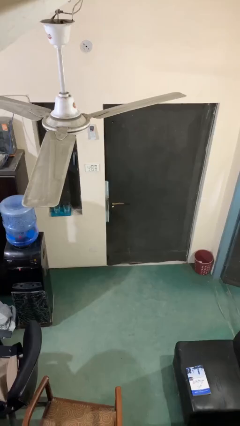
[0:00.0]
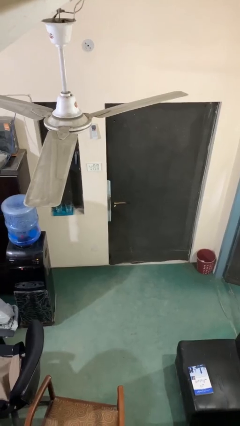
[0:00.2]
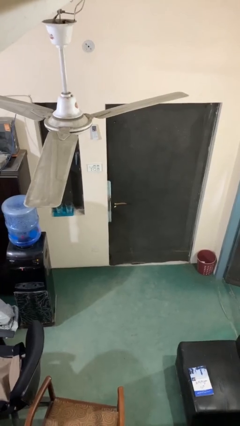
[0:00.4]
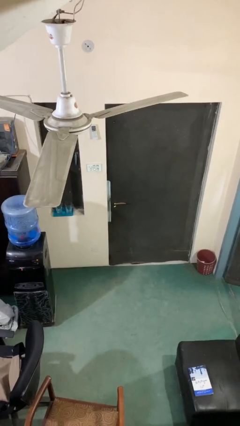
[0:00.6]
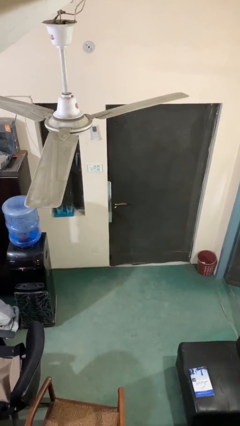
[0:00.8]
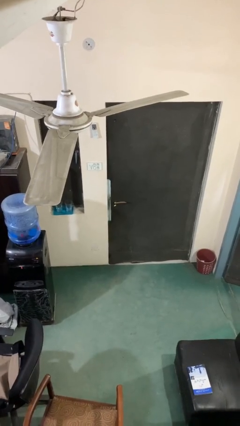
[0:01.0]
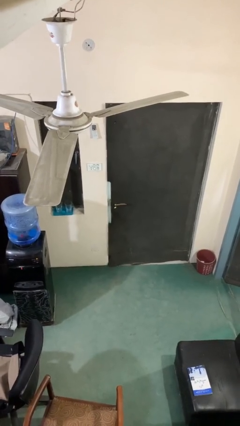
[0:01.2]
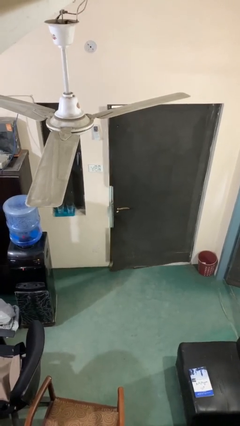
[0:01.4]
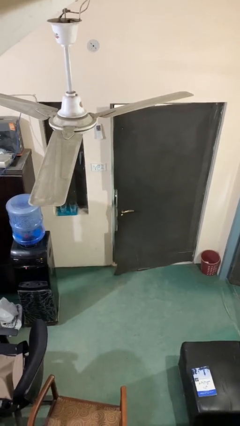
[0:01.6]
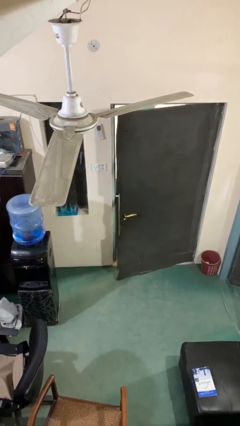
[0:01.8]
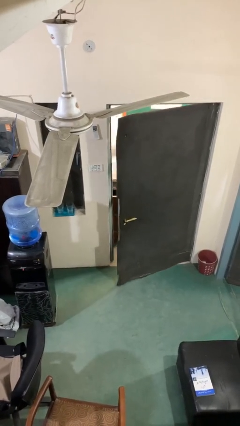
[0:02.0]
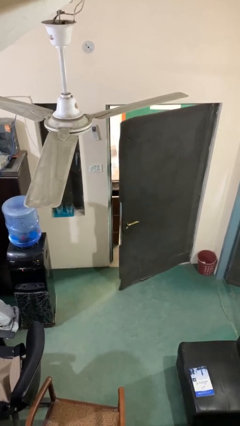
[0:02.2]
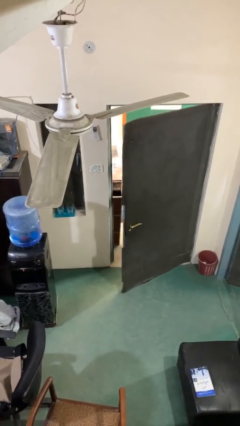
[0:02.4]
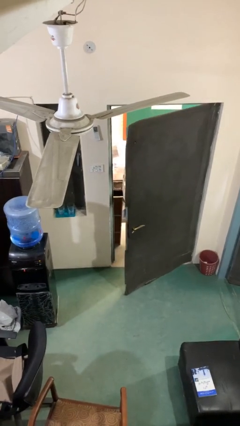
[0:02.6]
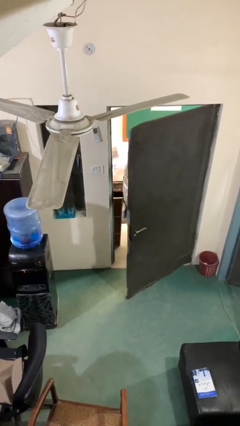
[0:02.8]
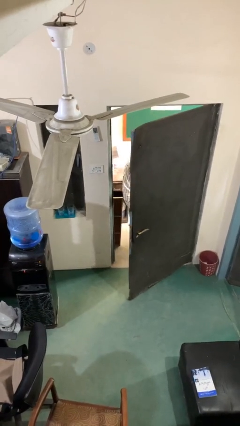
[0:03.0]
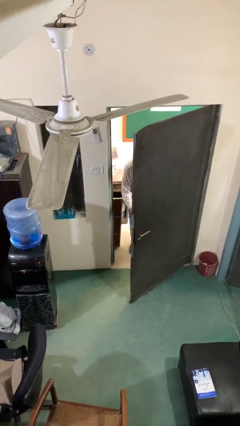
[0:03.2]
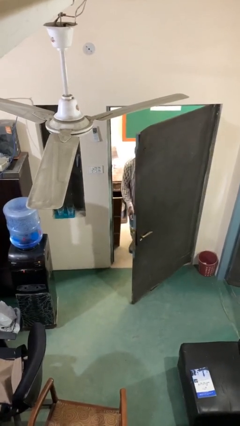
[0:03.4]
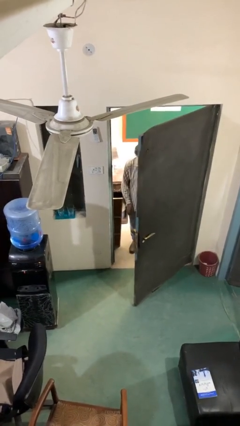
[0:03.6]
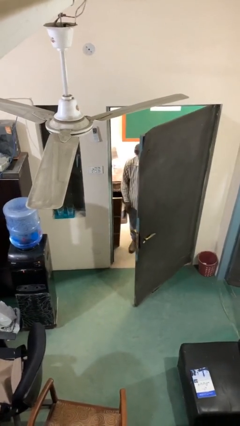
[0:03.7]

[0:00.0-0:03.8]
person opens facility door

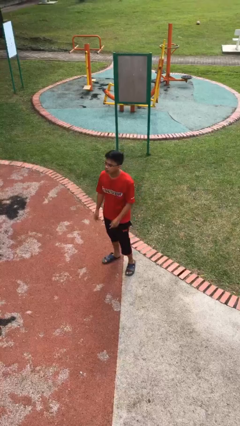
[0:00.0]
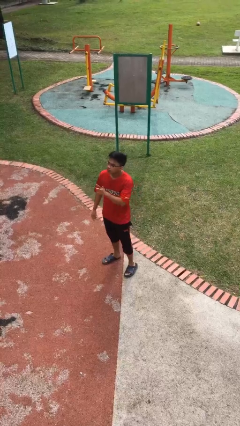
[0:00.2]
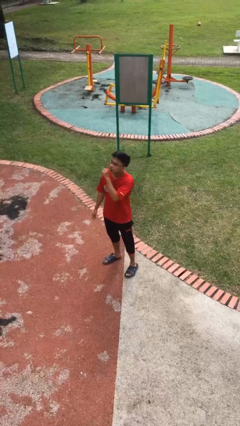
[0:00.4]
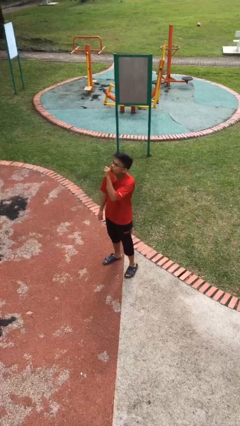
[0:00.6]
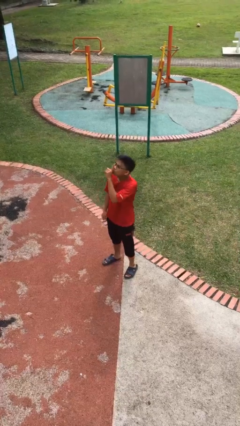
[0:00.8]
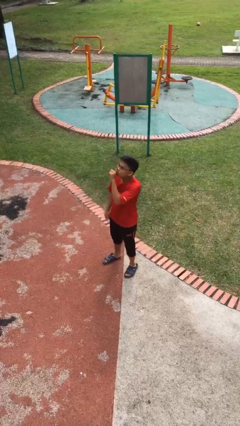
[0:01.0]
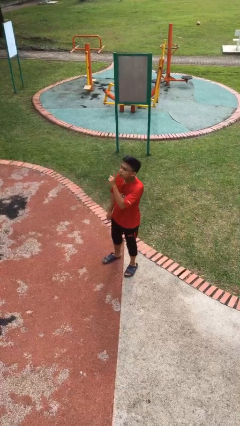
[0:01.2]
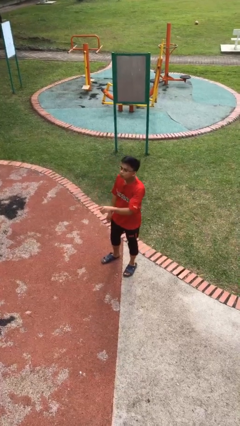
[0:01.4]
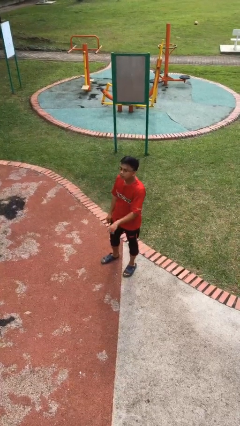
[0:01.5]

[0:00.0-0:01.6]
person gestures be quiet

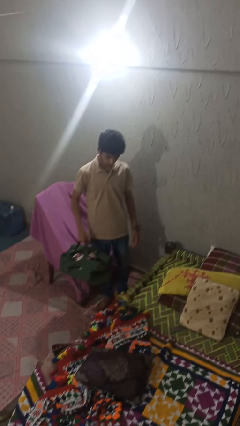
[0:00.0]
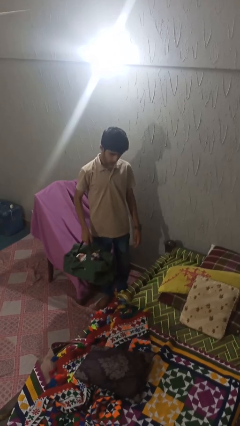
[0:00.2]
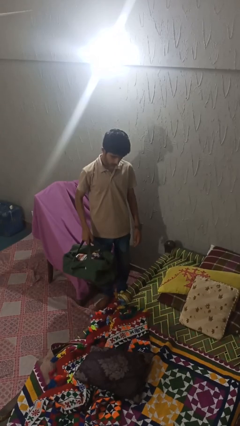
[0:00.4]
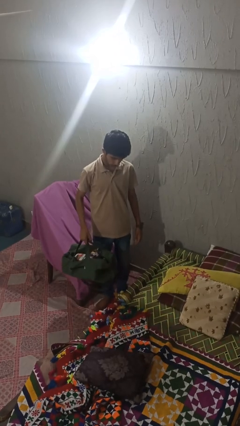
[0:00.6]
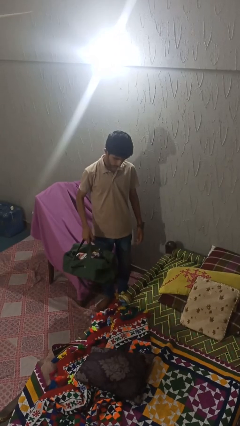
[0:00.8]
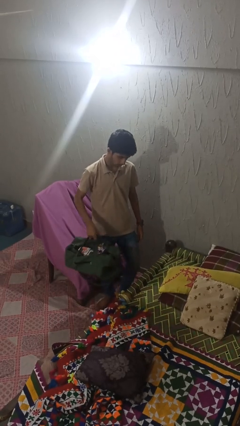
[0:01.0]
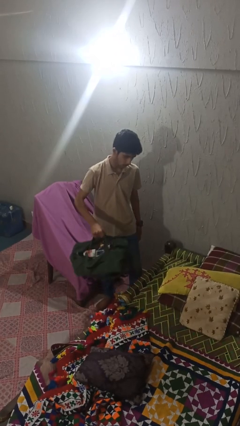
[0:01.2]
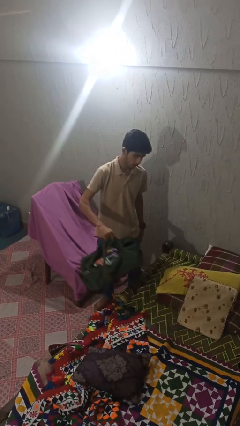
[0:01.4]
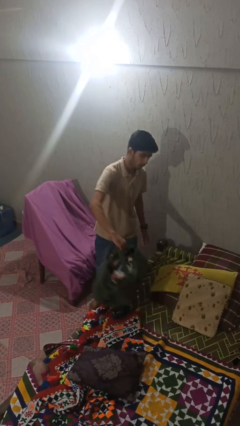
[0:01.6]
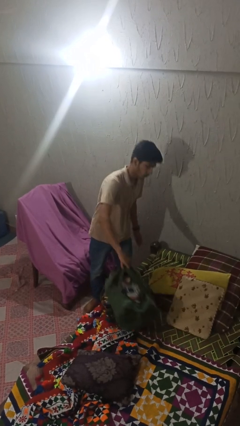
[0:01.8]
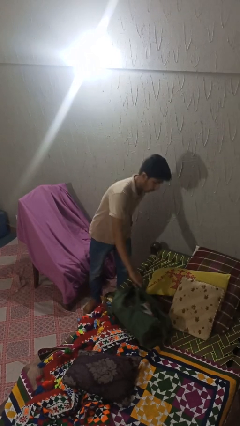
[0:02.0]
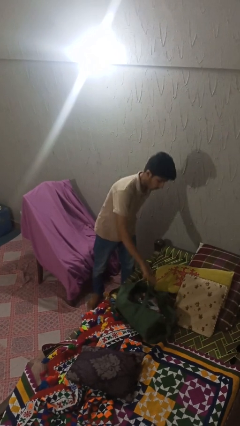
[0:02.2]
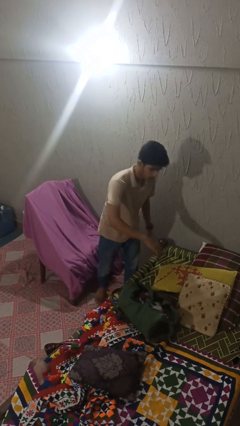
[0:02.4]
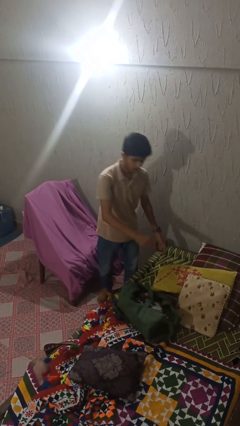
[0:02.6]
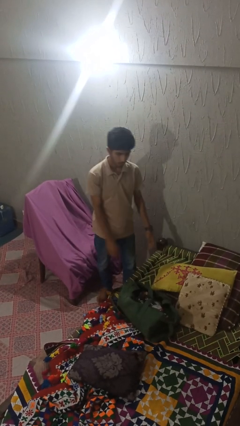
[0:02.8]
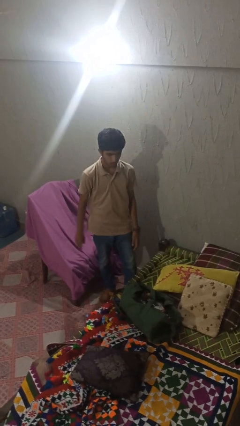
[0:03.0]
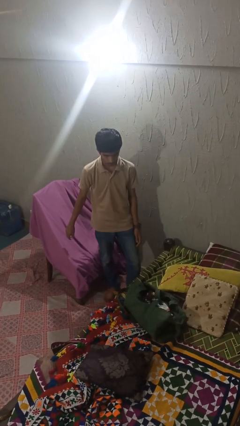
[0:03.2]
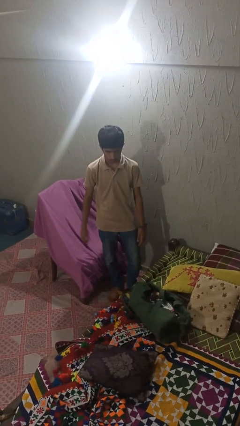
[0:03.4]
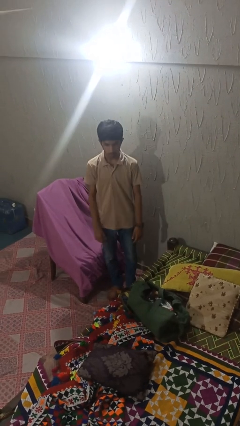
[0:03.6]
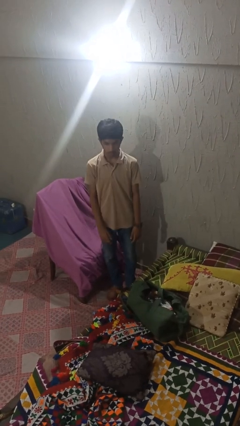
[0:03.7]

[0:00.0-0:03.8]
person puts down object on bed

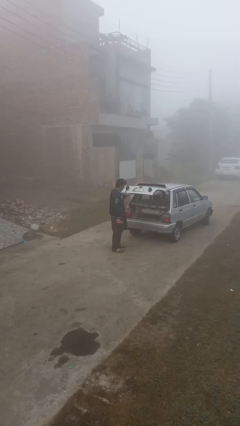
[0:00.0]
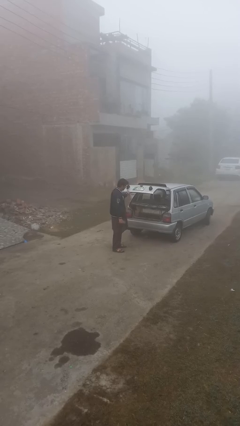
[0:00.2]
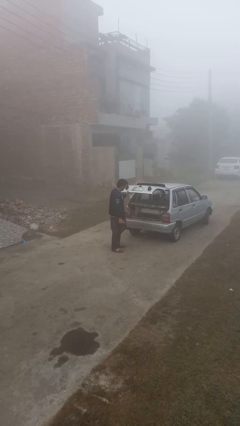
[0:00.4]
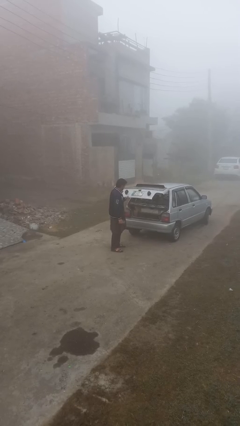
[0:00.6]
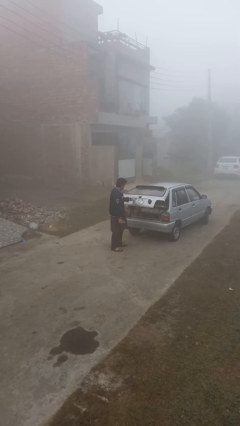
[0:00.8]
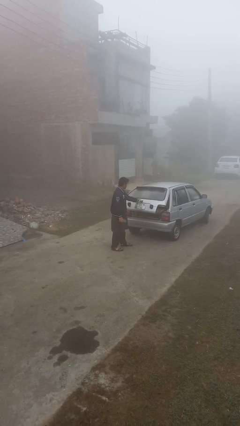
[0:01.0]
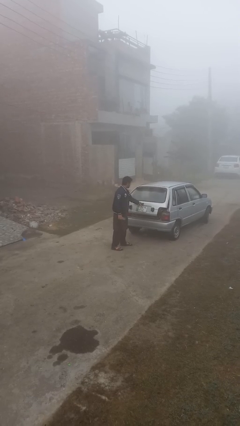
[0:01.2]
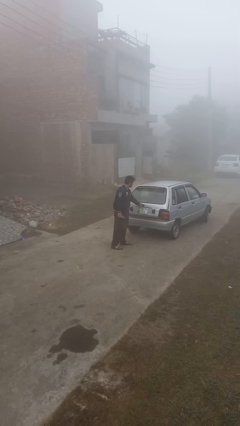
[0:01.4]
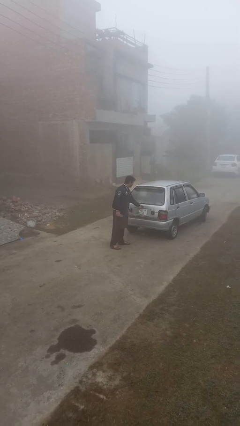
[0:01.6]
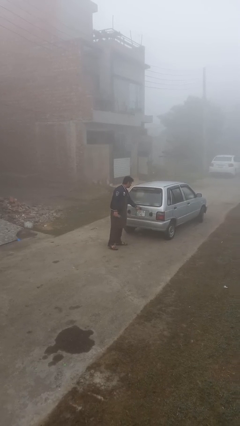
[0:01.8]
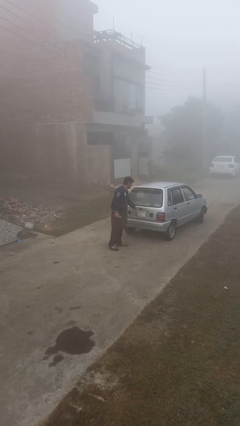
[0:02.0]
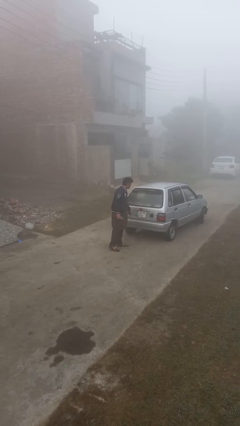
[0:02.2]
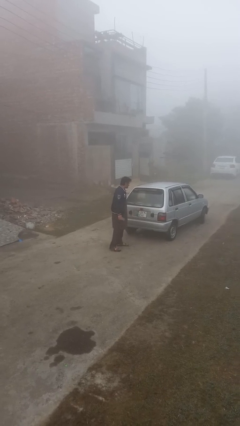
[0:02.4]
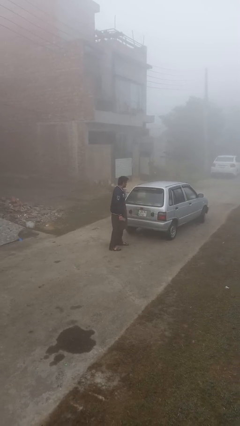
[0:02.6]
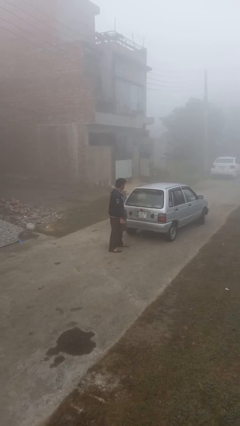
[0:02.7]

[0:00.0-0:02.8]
person closes car trunk

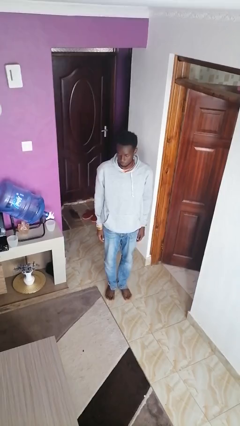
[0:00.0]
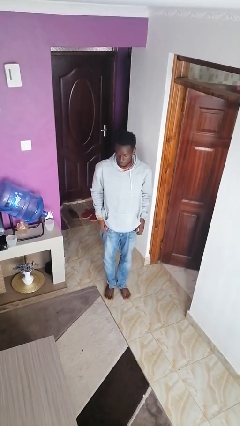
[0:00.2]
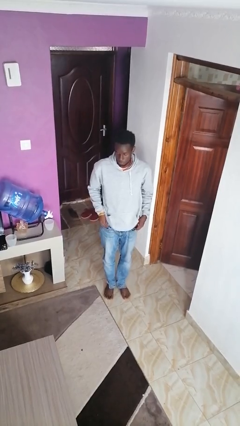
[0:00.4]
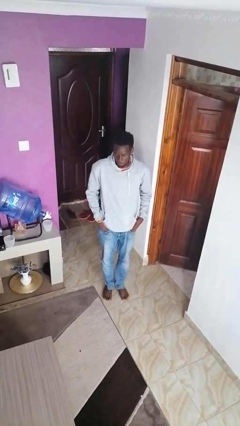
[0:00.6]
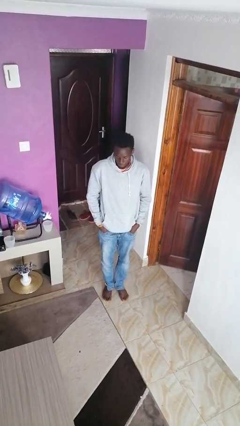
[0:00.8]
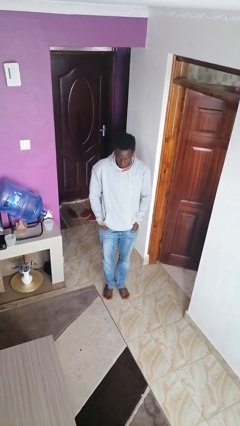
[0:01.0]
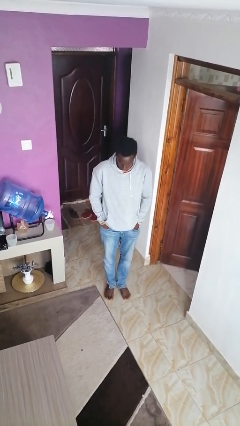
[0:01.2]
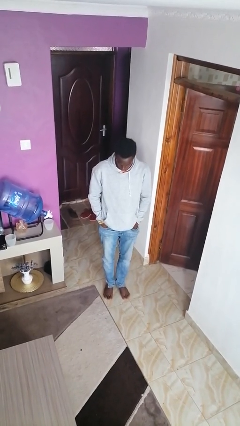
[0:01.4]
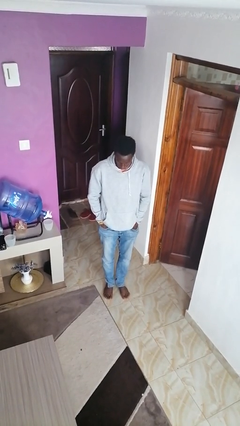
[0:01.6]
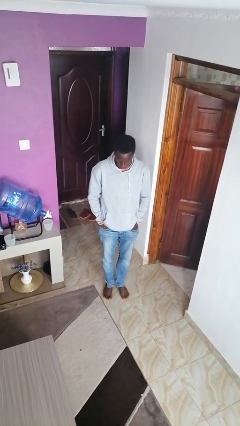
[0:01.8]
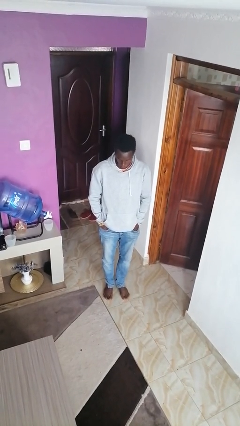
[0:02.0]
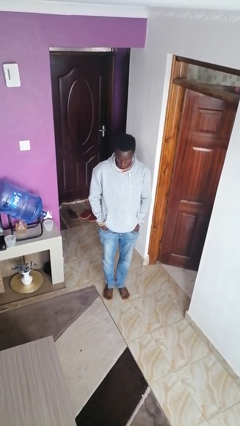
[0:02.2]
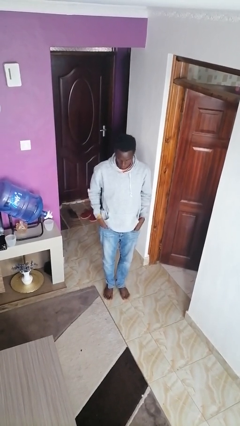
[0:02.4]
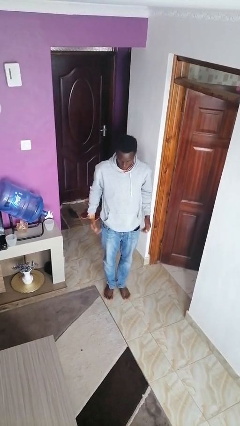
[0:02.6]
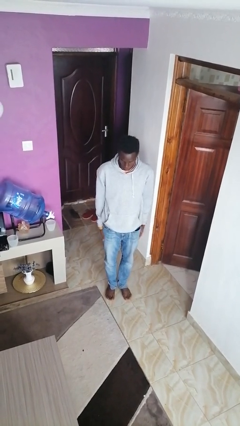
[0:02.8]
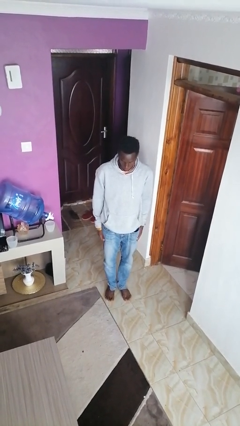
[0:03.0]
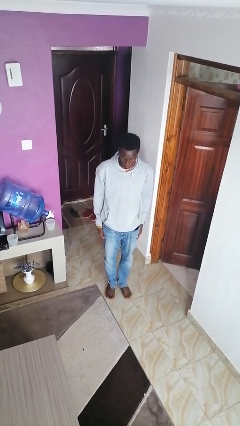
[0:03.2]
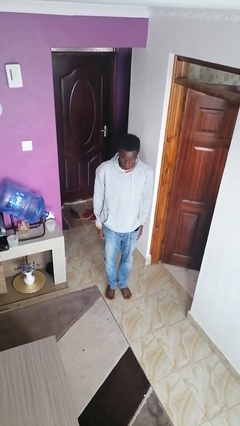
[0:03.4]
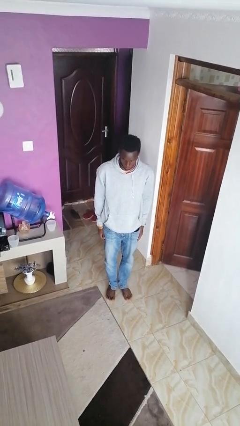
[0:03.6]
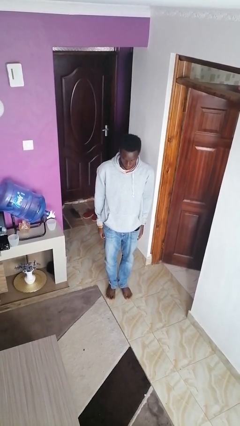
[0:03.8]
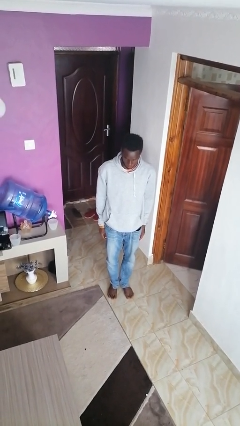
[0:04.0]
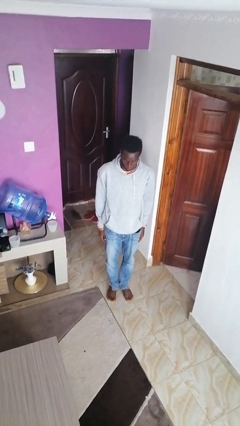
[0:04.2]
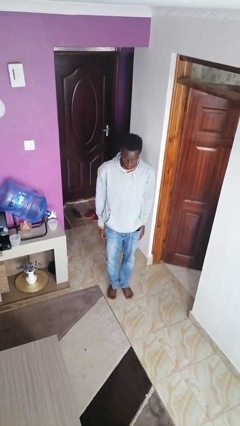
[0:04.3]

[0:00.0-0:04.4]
person puts hands in back pockets

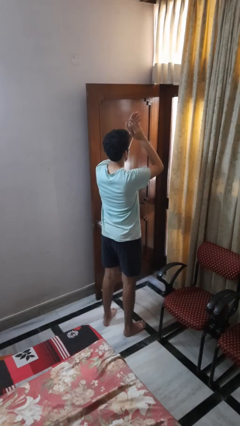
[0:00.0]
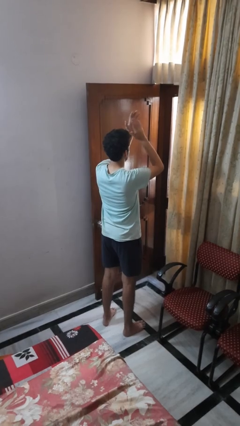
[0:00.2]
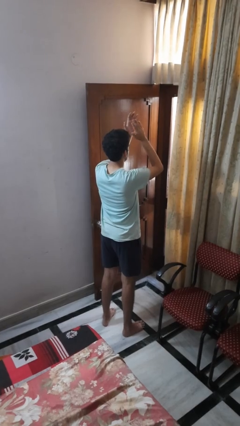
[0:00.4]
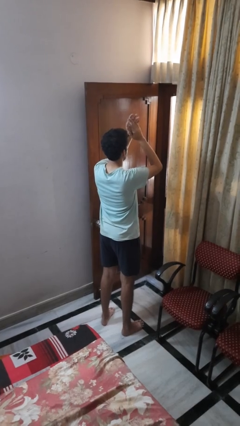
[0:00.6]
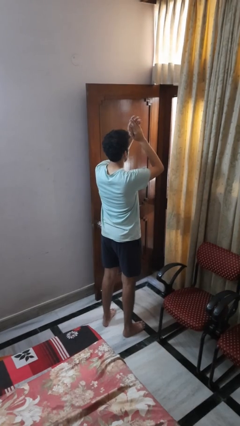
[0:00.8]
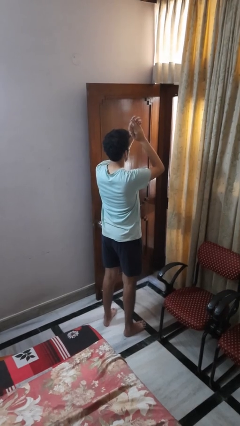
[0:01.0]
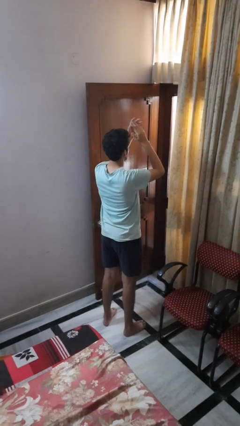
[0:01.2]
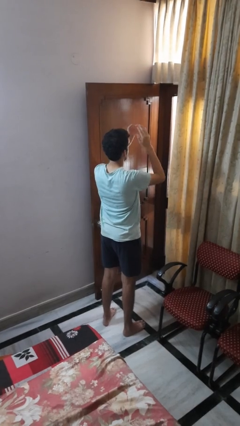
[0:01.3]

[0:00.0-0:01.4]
person claps hands
